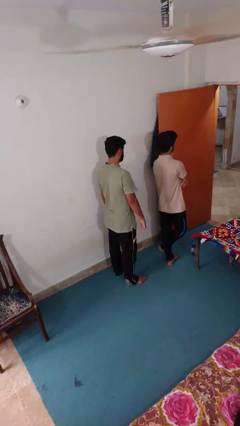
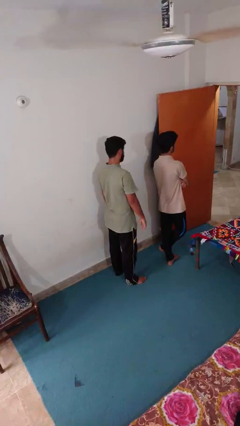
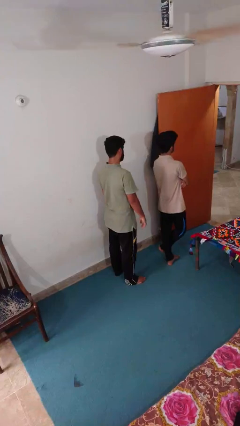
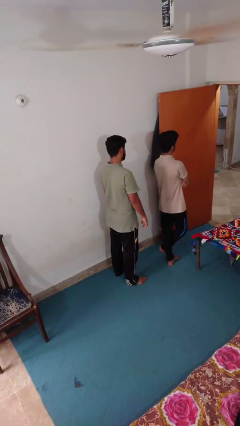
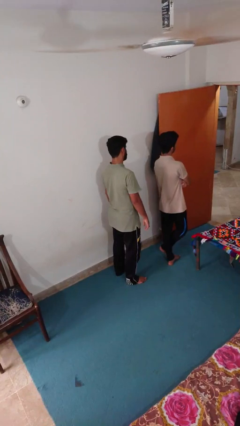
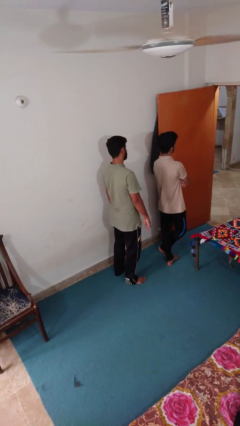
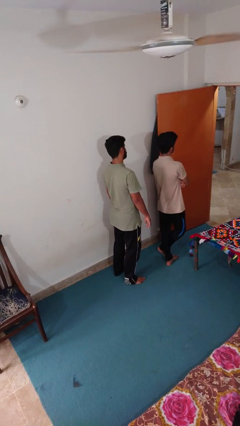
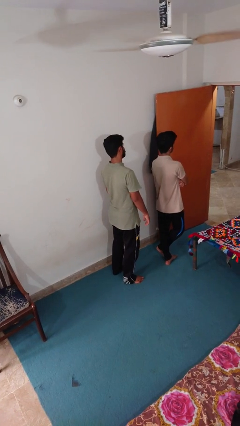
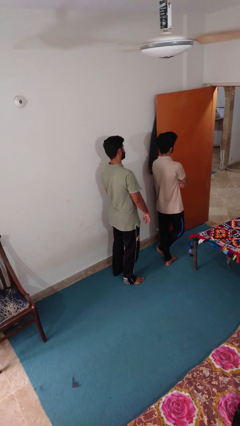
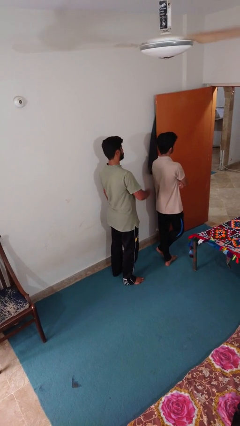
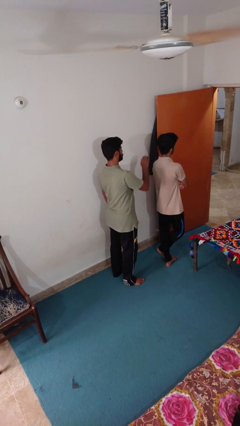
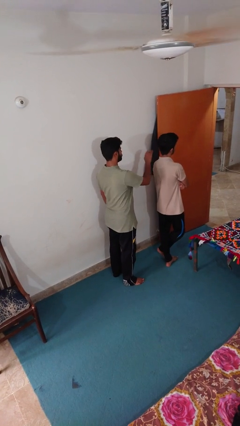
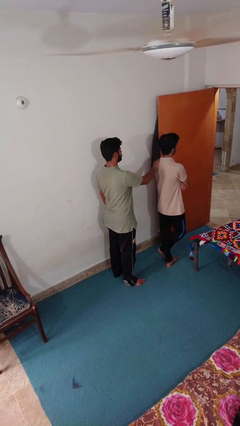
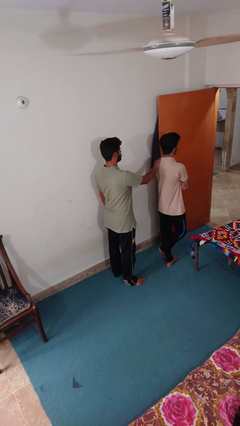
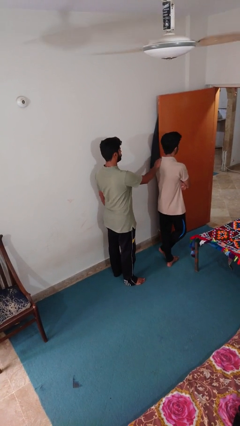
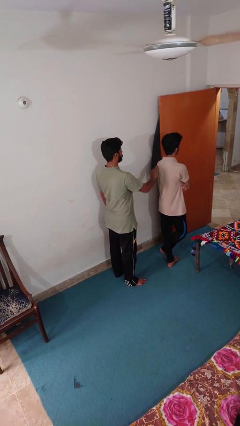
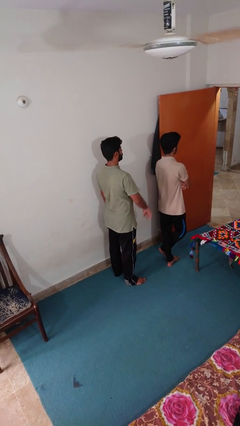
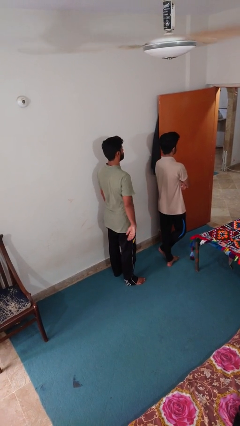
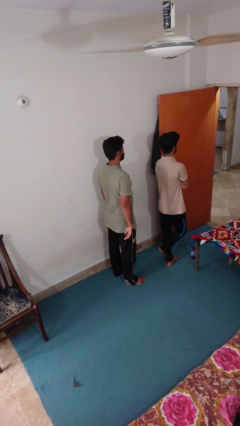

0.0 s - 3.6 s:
person touches back of person

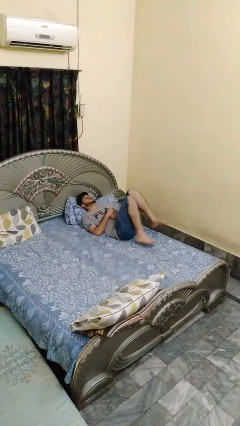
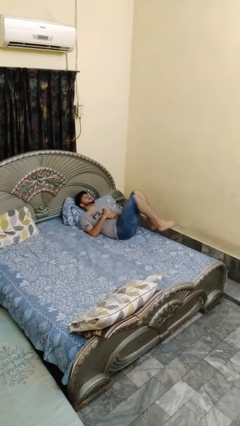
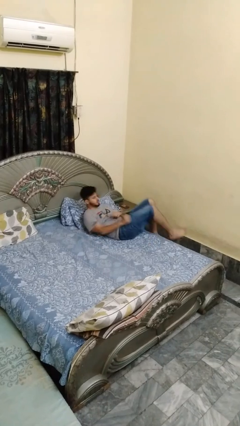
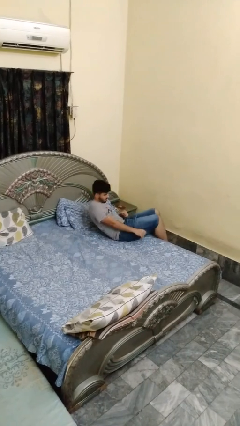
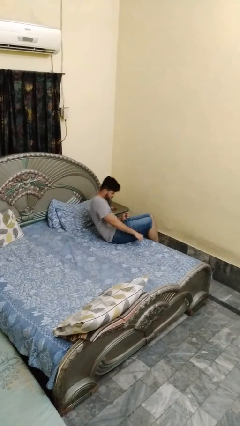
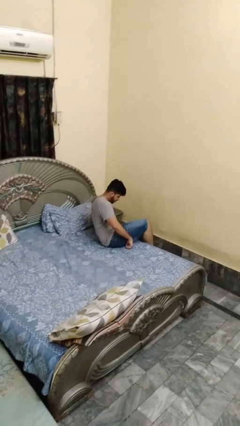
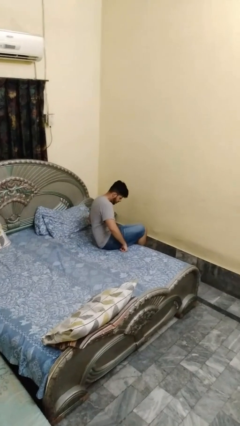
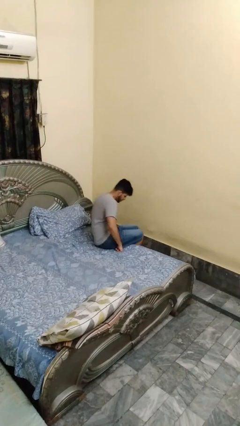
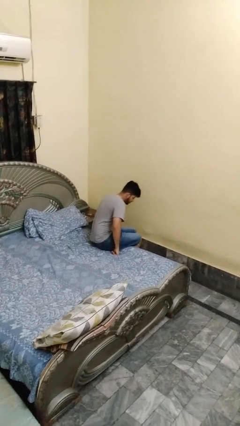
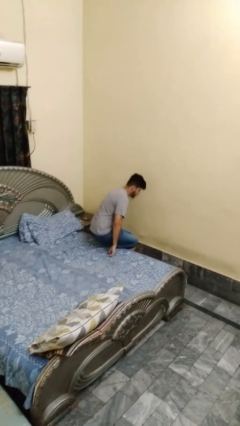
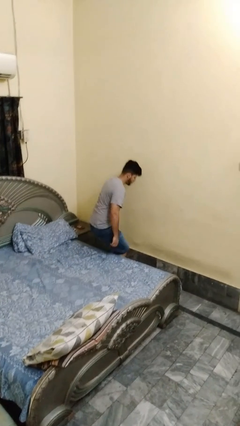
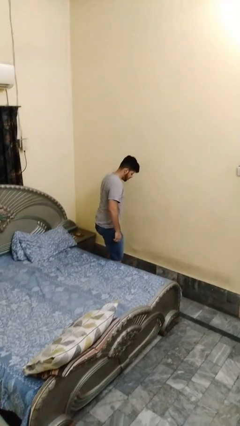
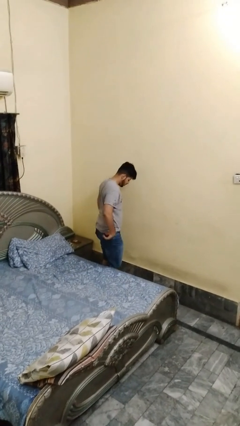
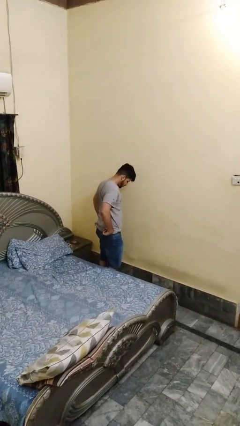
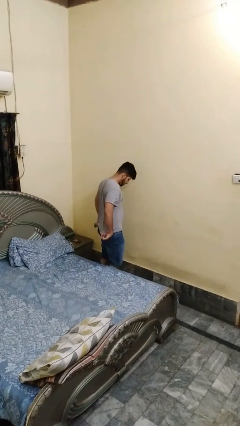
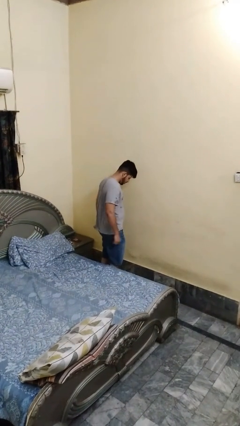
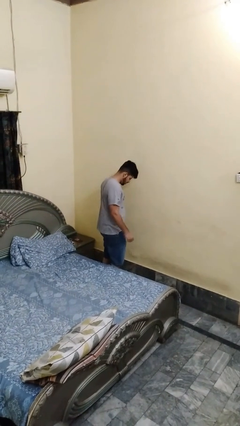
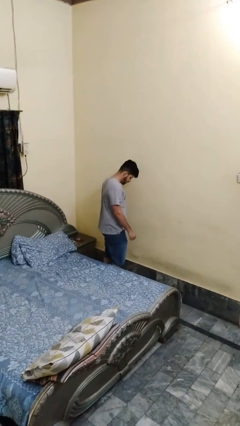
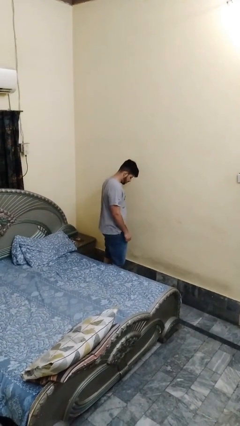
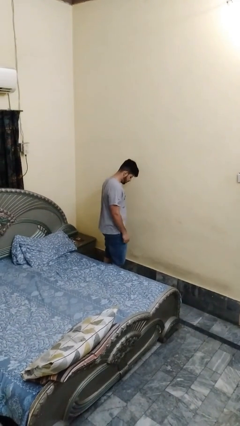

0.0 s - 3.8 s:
person stands up

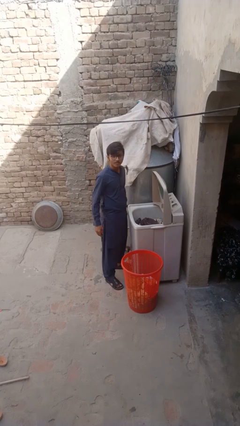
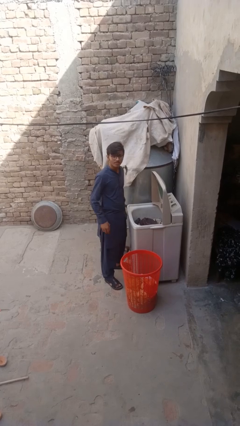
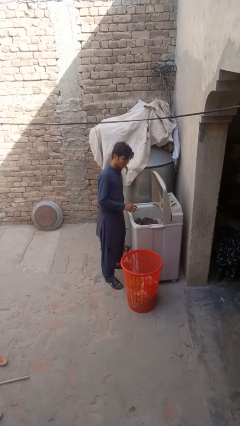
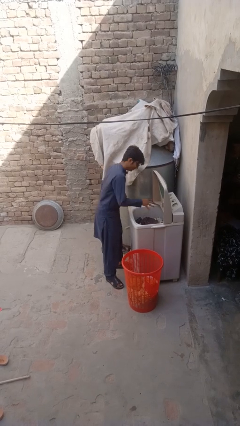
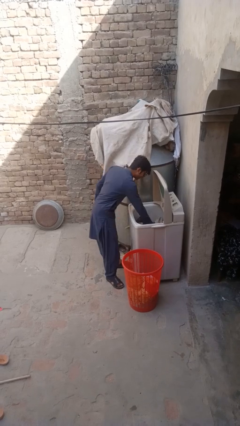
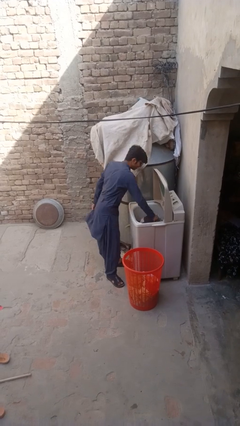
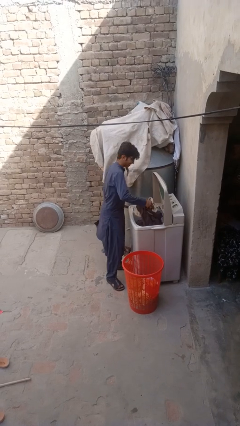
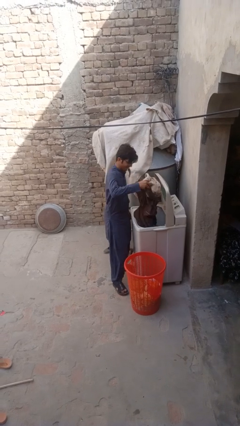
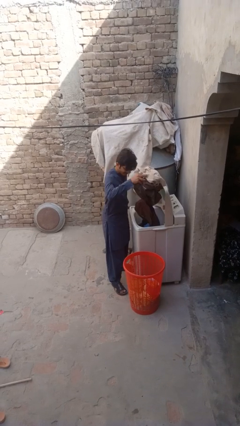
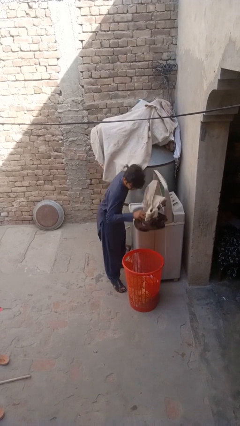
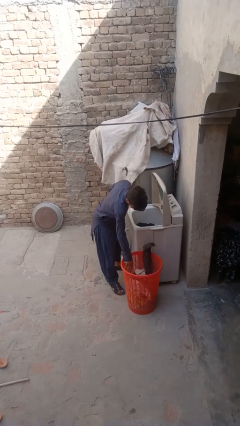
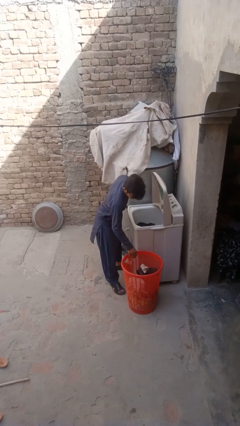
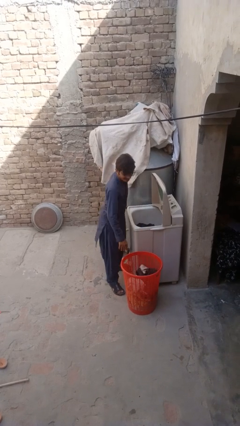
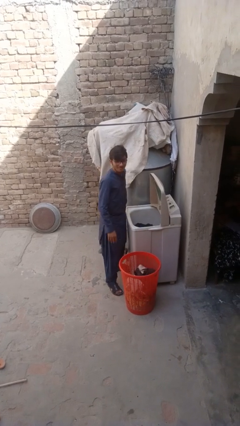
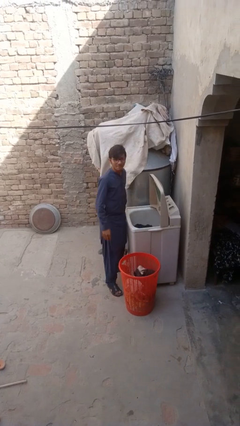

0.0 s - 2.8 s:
person unloads clotheswasher

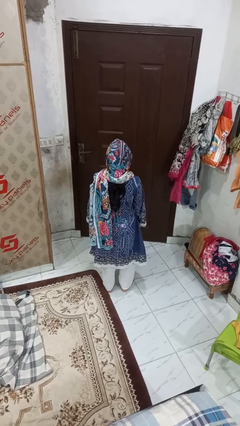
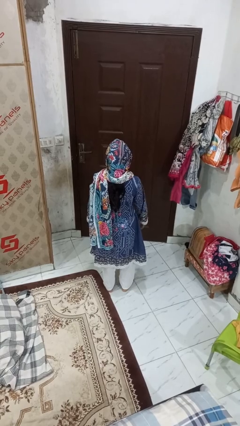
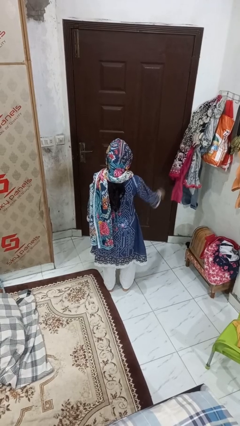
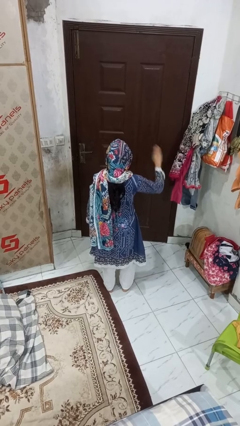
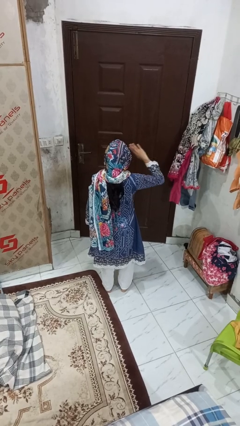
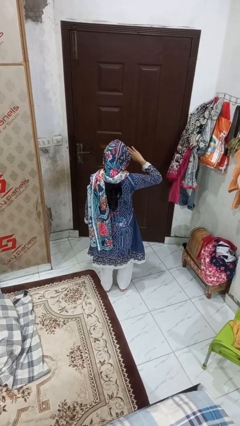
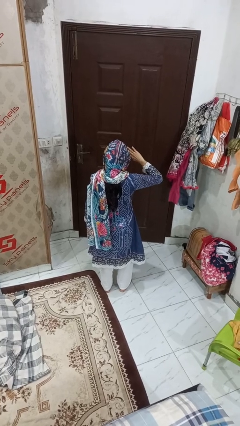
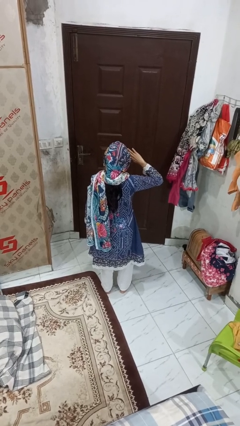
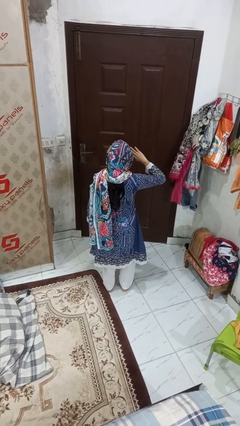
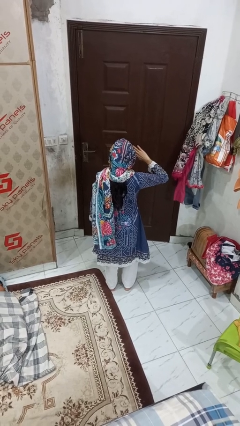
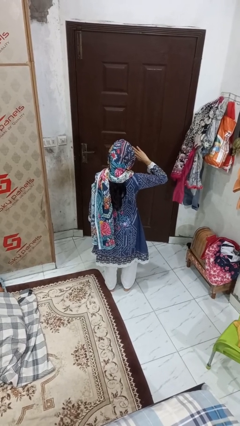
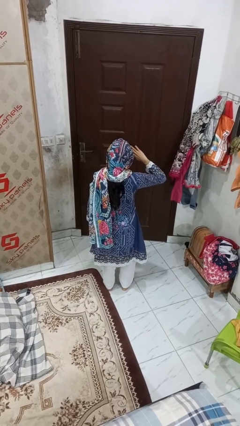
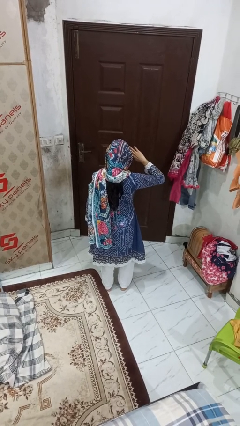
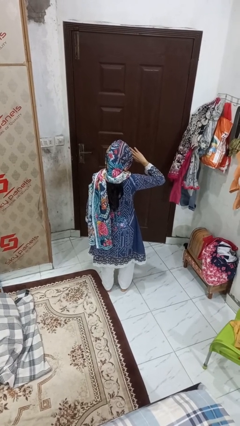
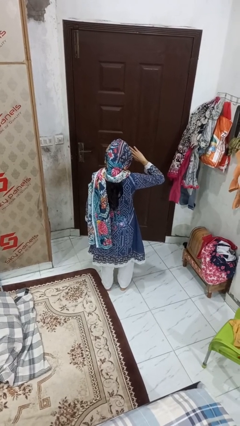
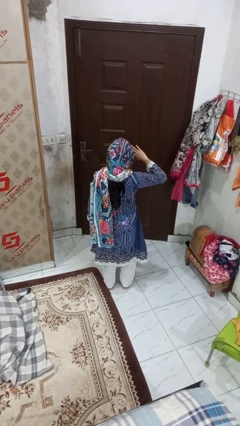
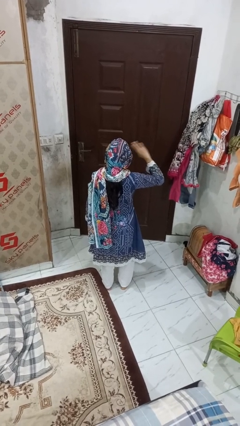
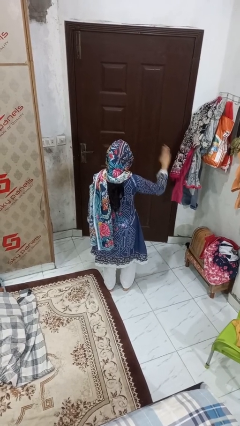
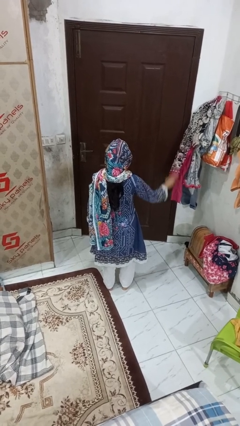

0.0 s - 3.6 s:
person salutes

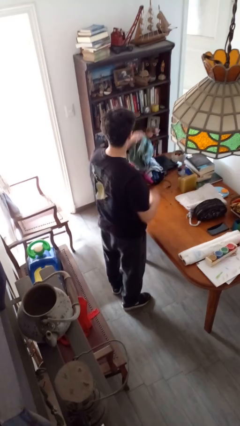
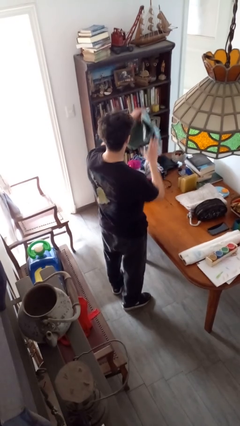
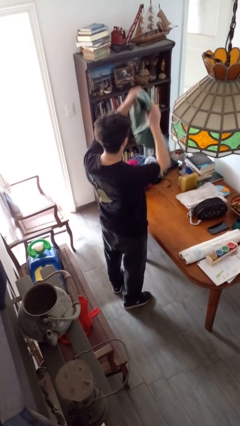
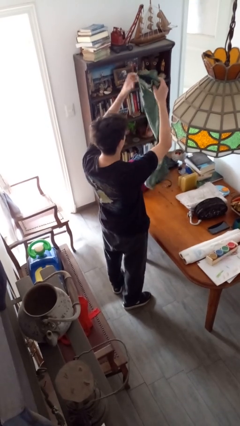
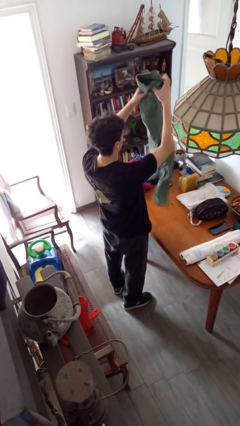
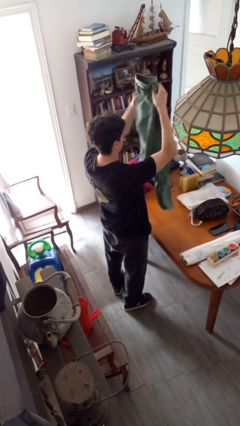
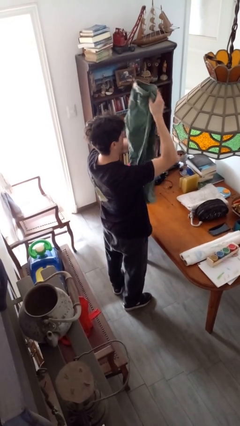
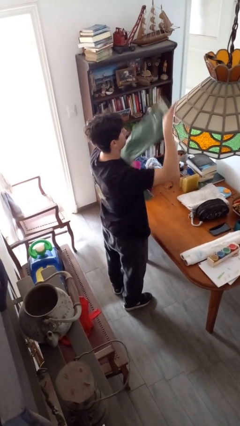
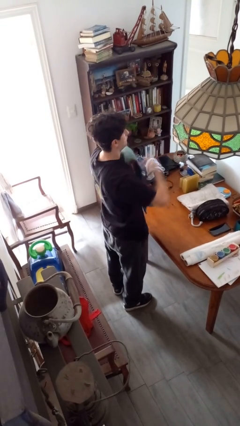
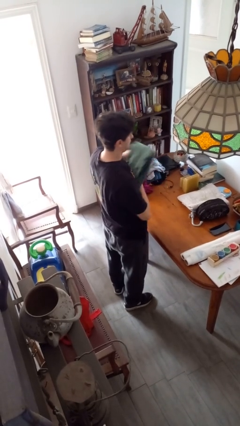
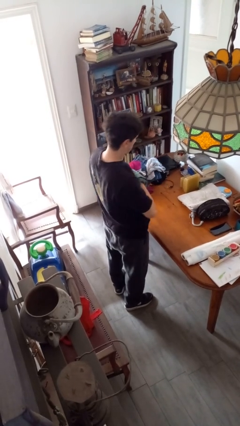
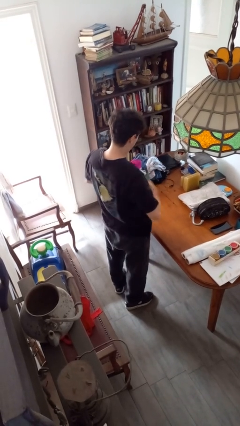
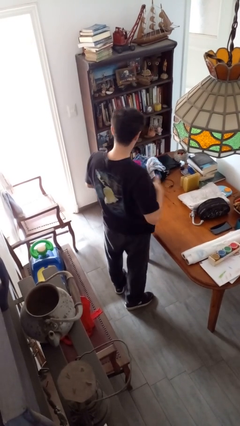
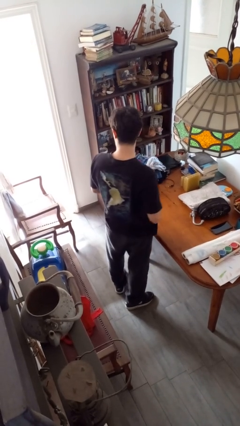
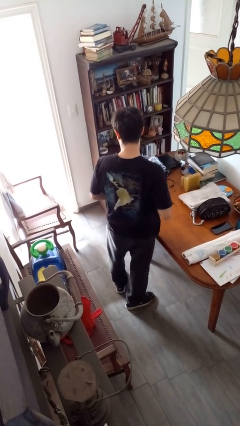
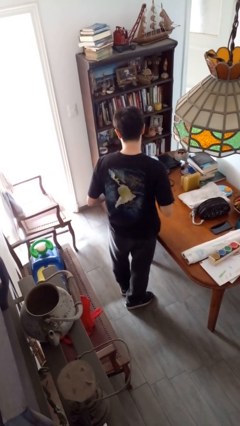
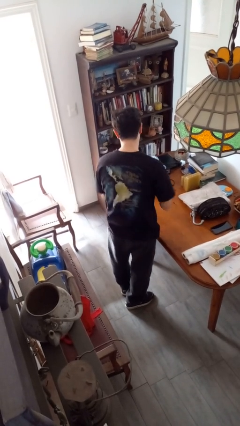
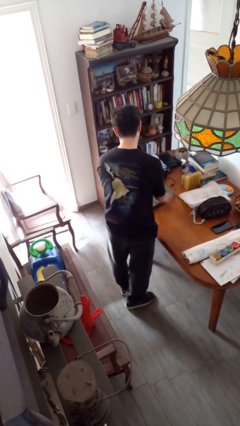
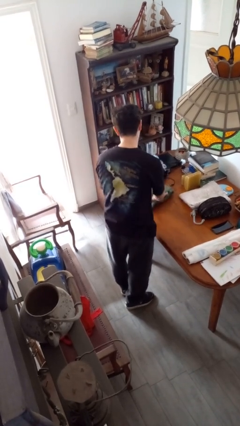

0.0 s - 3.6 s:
person folds shirt

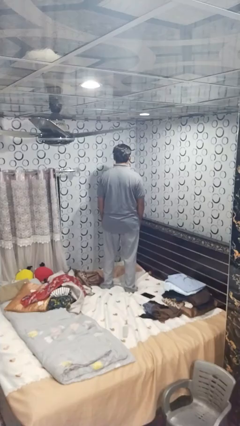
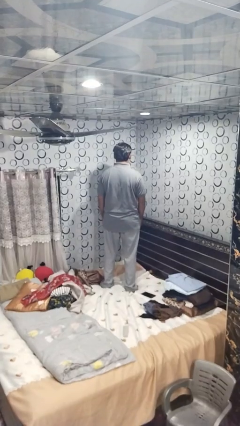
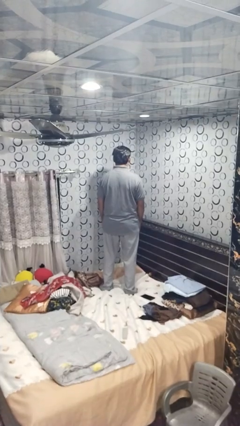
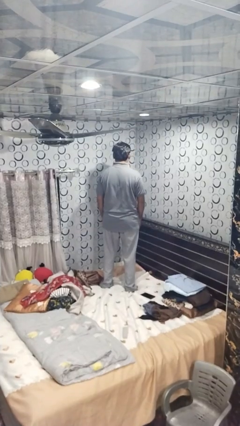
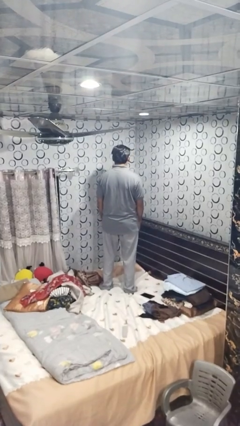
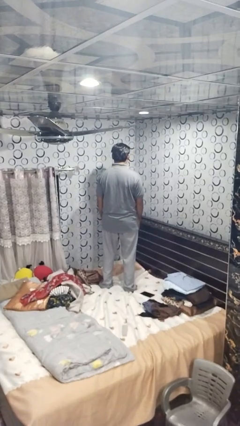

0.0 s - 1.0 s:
person jumps on bed
